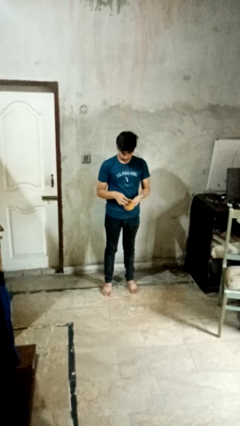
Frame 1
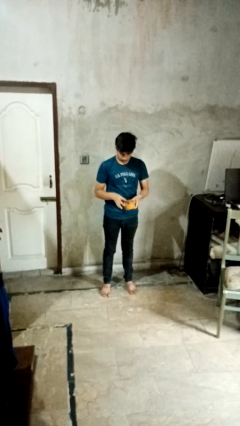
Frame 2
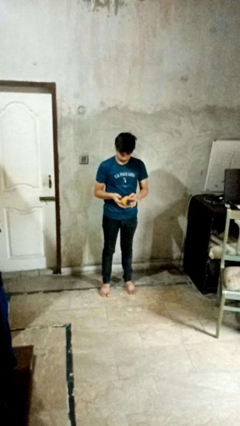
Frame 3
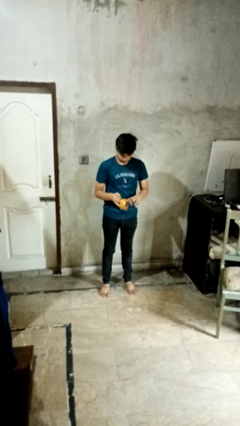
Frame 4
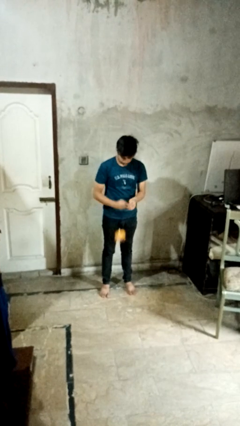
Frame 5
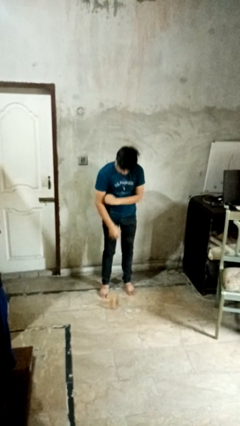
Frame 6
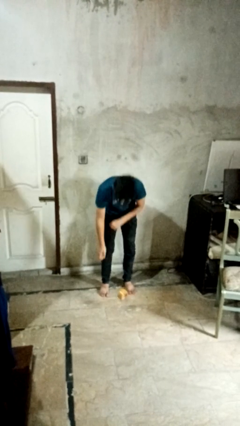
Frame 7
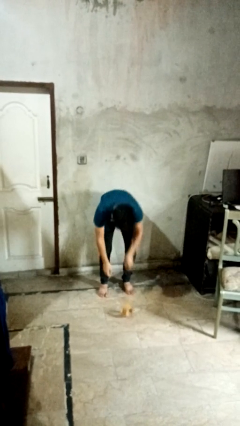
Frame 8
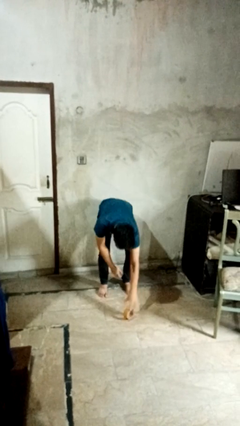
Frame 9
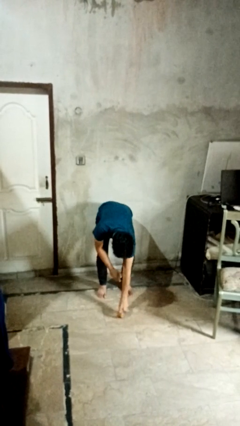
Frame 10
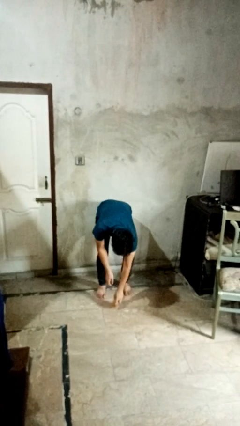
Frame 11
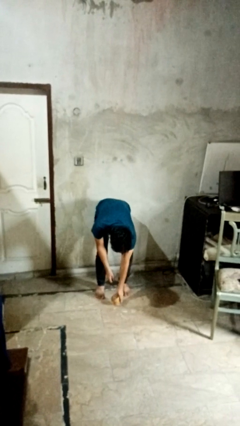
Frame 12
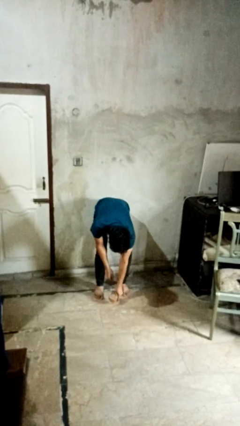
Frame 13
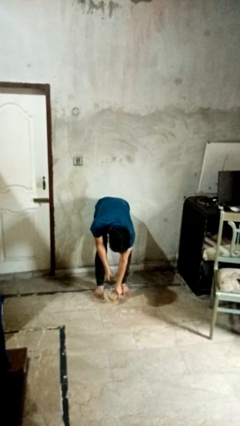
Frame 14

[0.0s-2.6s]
person drops object

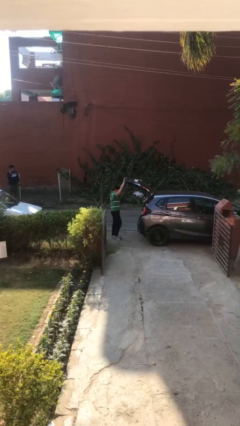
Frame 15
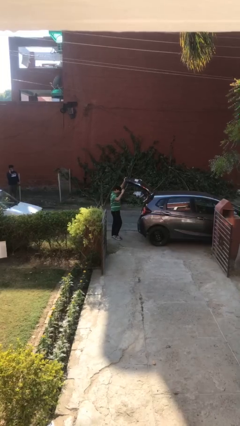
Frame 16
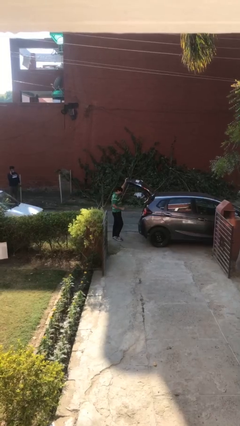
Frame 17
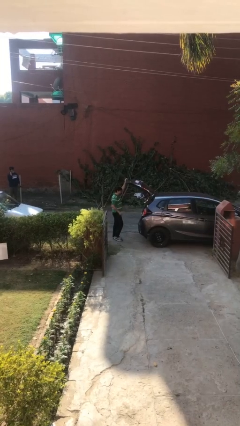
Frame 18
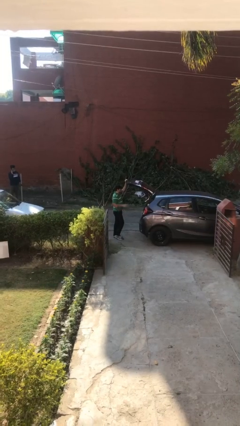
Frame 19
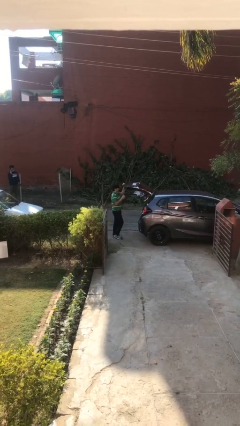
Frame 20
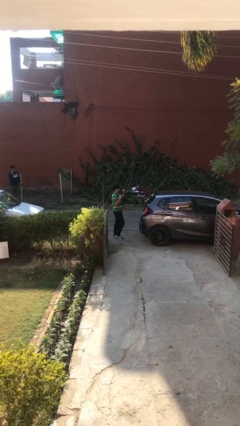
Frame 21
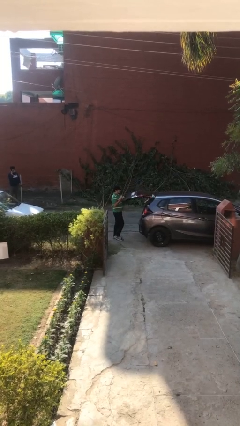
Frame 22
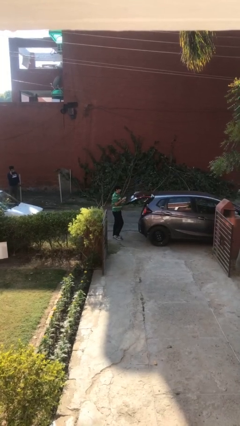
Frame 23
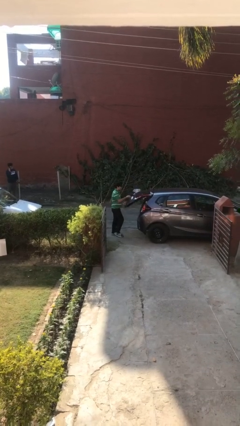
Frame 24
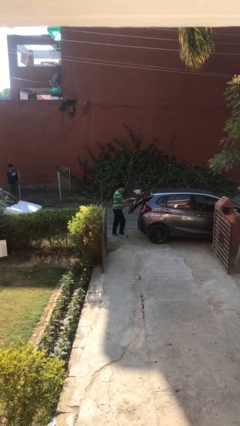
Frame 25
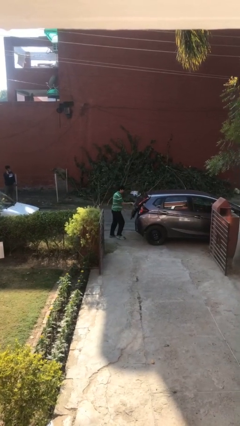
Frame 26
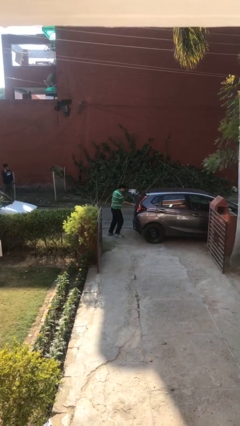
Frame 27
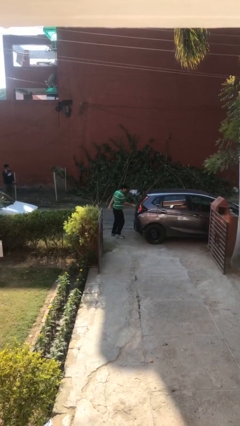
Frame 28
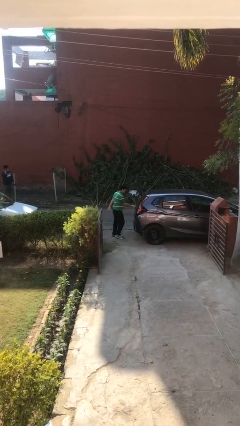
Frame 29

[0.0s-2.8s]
person closes car trunk

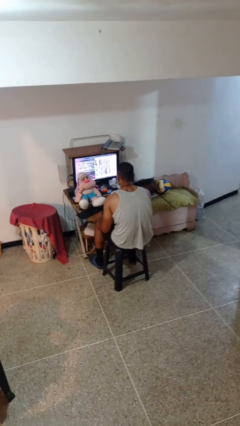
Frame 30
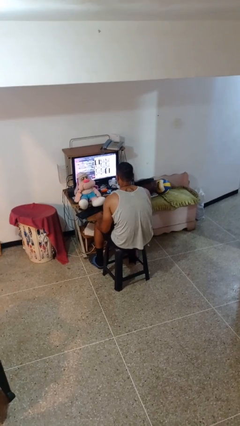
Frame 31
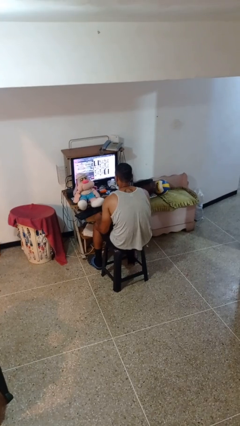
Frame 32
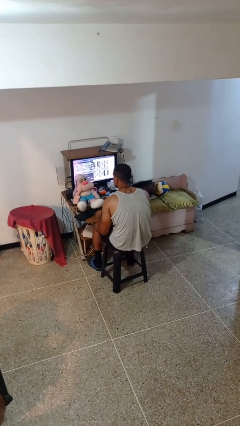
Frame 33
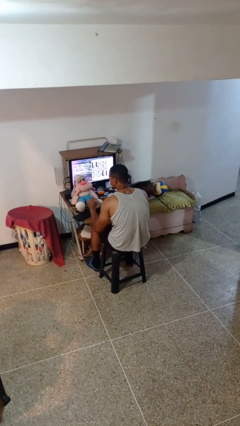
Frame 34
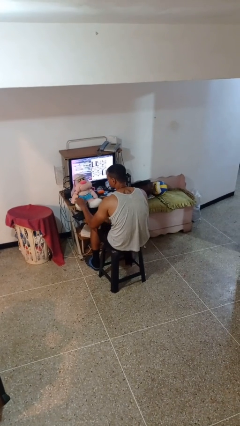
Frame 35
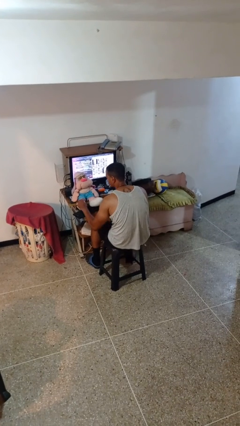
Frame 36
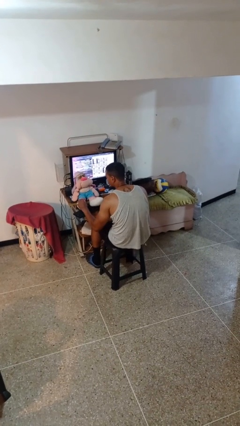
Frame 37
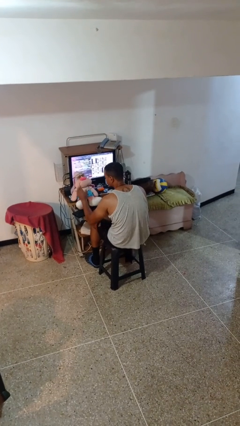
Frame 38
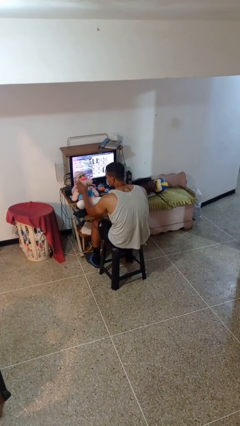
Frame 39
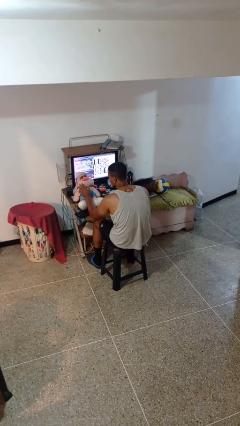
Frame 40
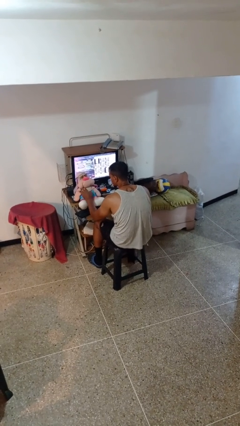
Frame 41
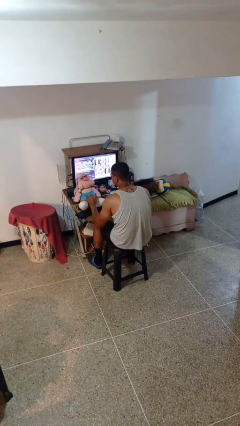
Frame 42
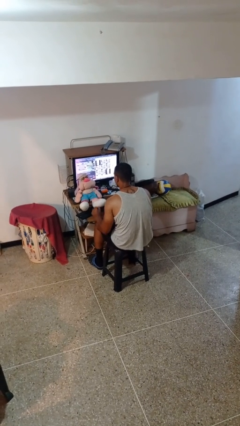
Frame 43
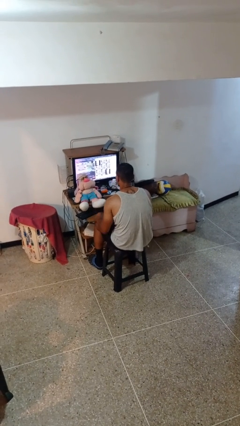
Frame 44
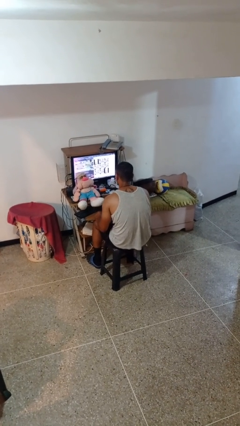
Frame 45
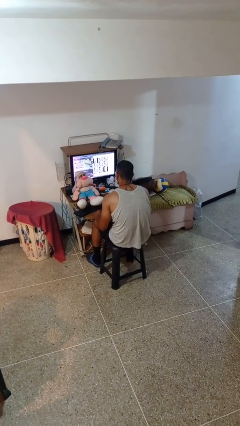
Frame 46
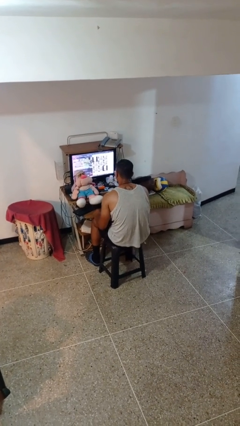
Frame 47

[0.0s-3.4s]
person waves hand over object

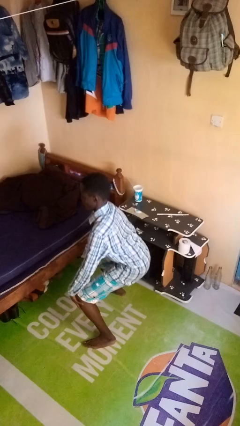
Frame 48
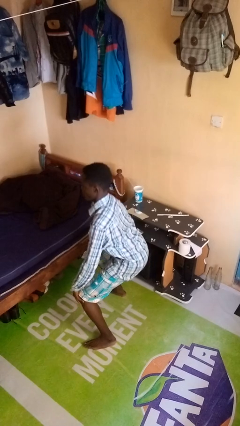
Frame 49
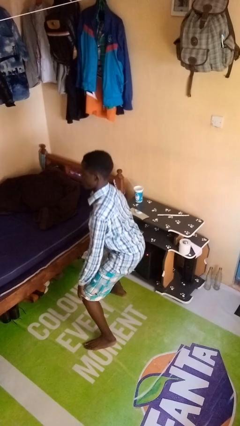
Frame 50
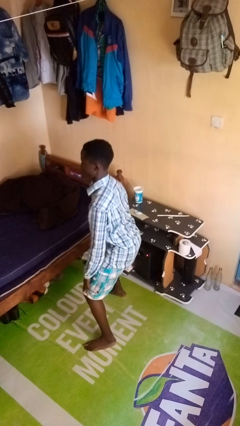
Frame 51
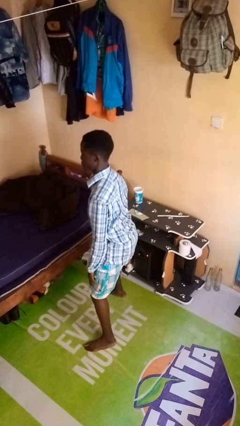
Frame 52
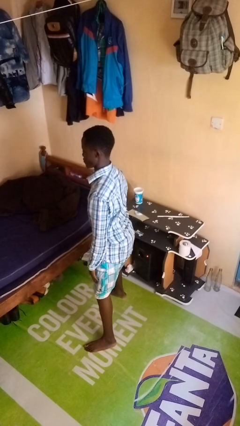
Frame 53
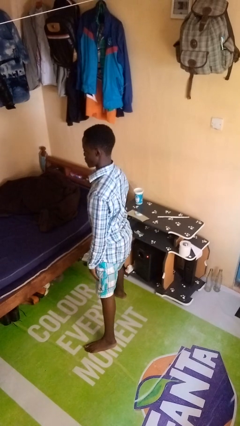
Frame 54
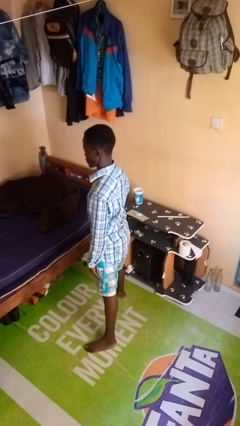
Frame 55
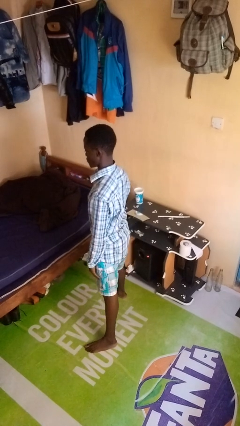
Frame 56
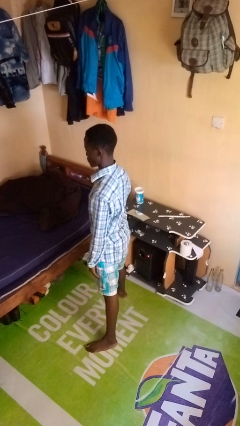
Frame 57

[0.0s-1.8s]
person stands up

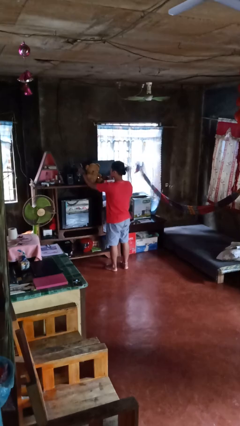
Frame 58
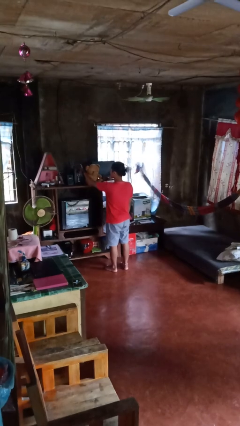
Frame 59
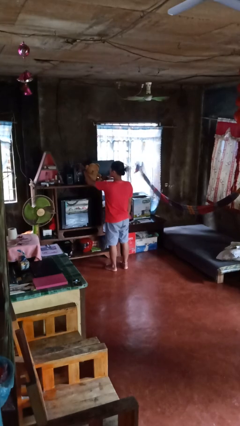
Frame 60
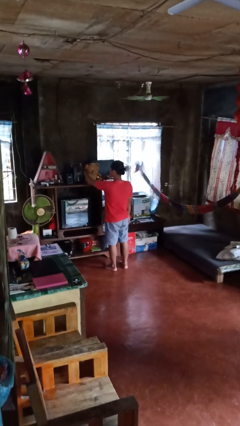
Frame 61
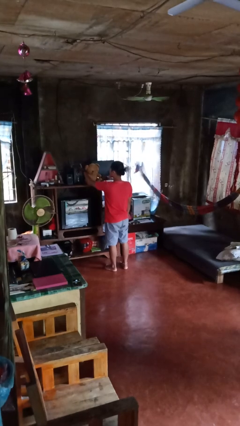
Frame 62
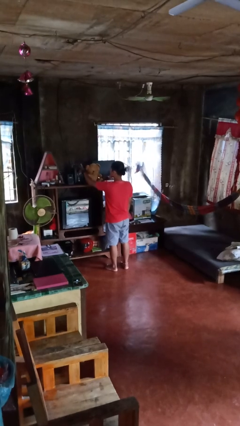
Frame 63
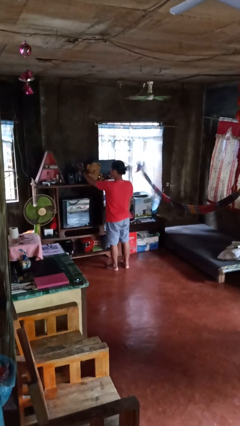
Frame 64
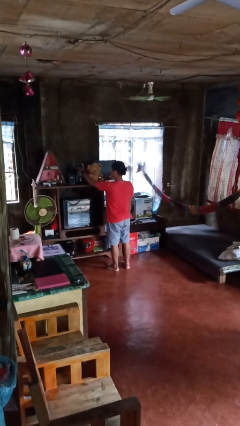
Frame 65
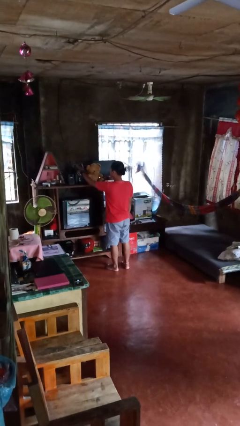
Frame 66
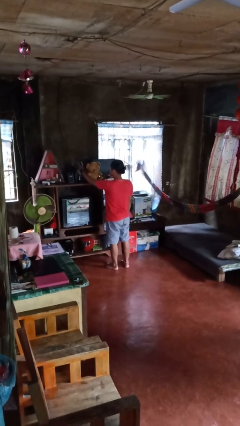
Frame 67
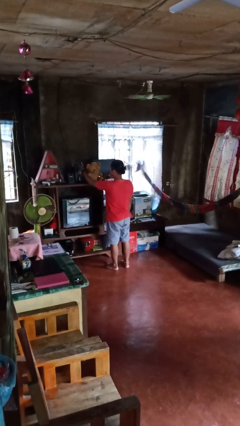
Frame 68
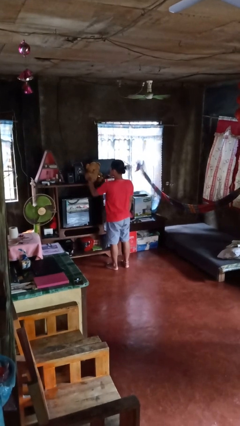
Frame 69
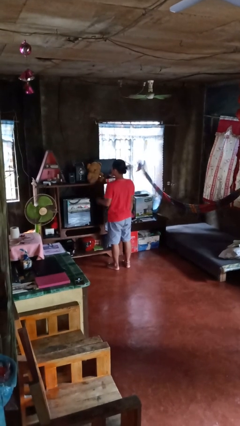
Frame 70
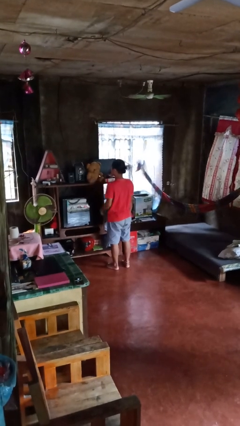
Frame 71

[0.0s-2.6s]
person taps object with finger

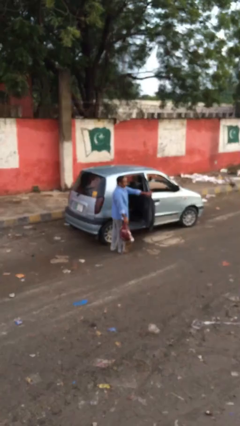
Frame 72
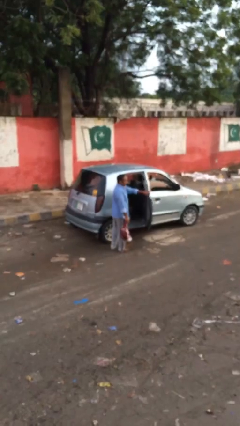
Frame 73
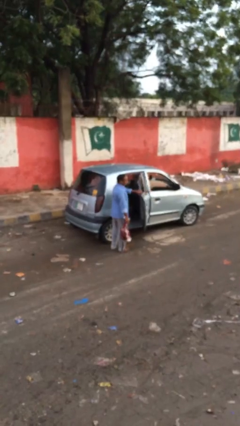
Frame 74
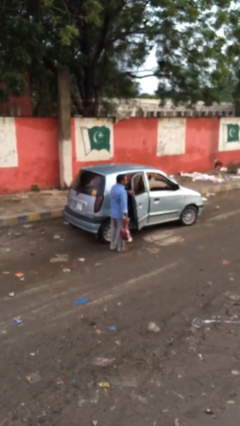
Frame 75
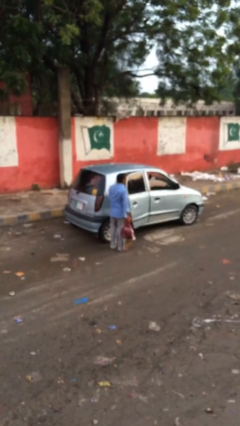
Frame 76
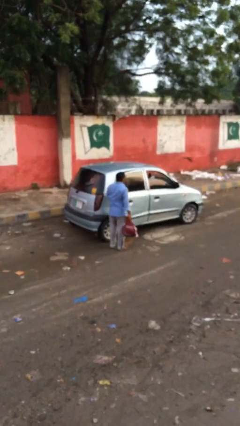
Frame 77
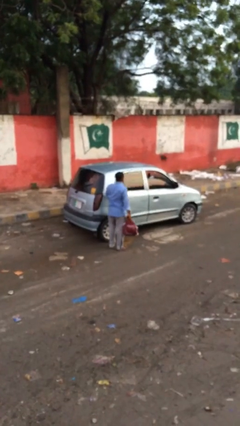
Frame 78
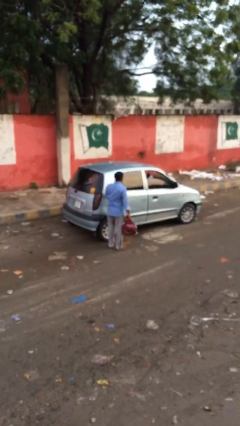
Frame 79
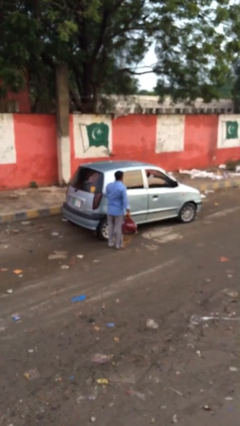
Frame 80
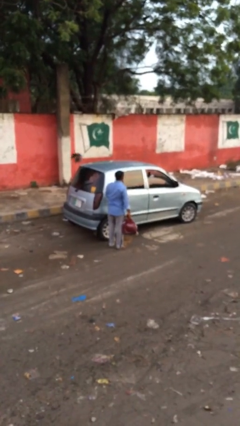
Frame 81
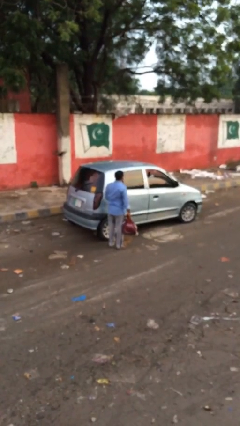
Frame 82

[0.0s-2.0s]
person closes car door

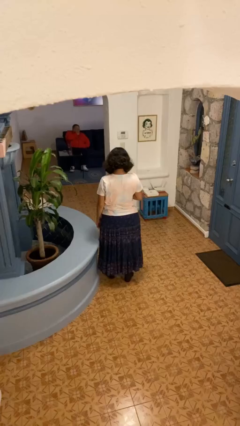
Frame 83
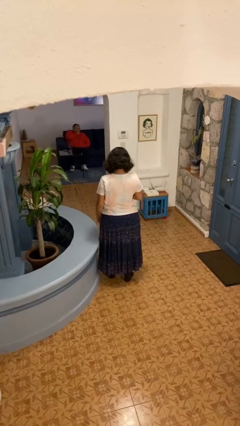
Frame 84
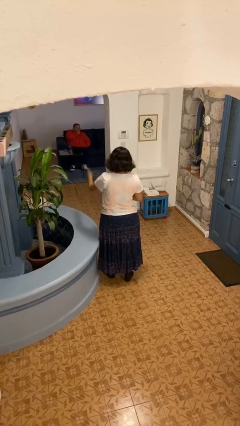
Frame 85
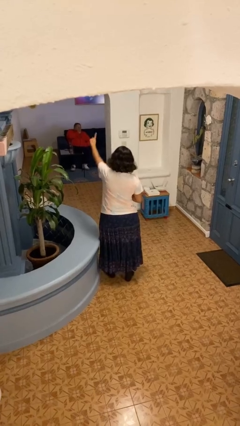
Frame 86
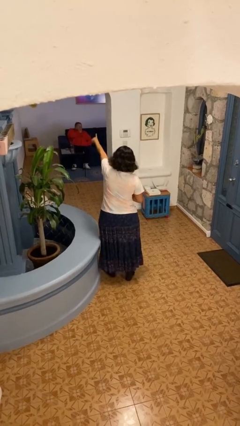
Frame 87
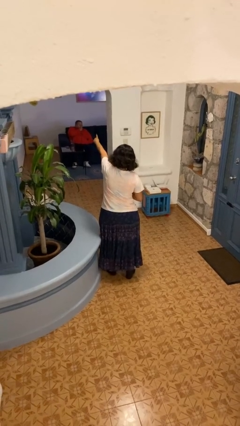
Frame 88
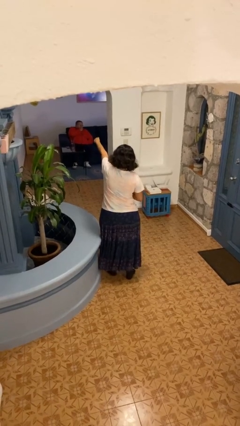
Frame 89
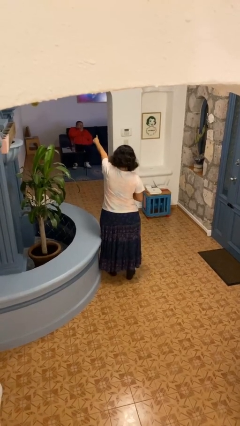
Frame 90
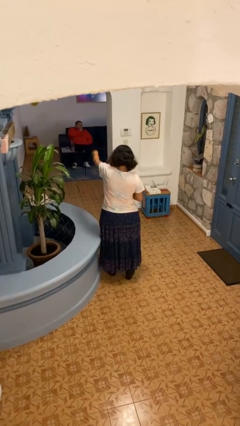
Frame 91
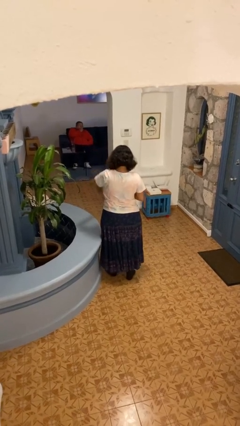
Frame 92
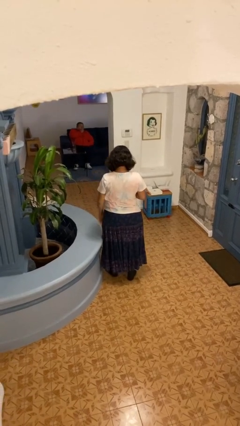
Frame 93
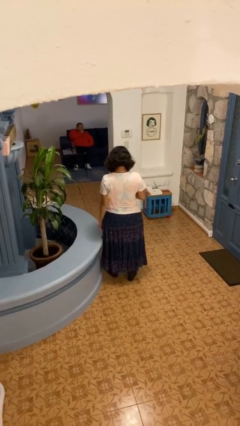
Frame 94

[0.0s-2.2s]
person points at person
